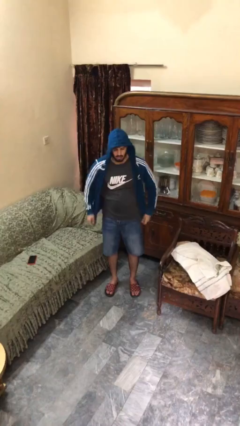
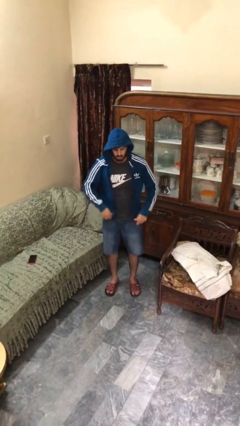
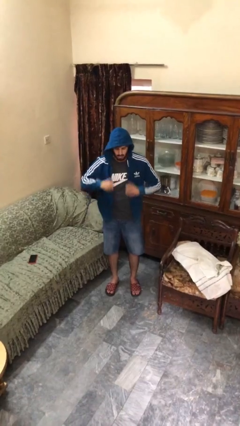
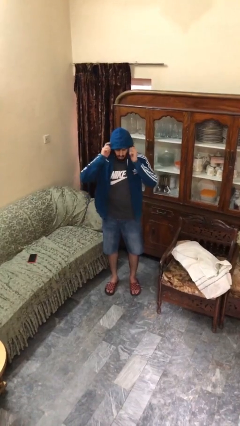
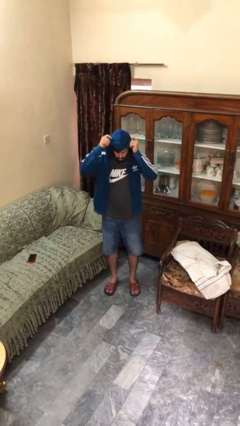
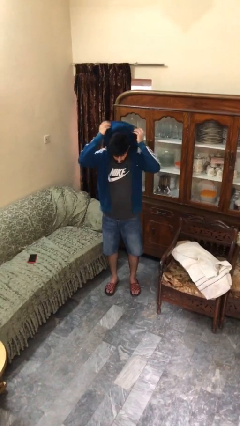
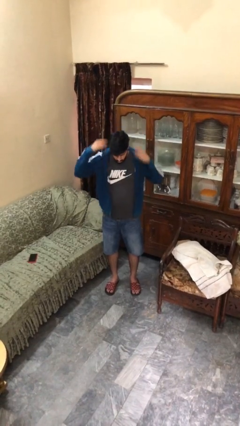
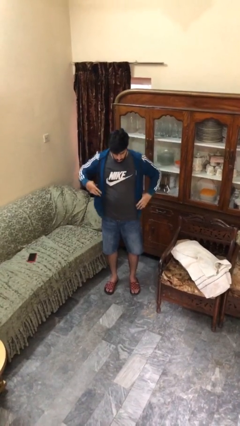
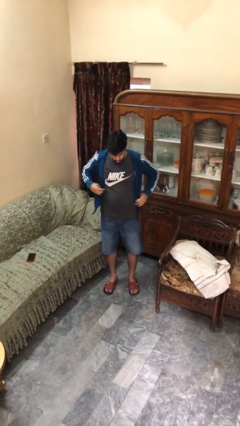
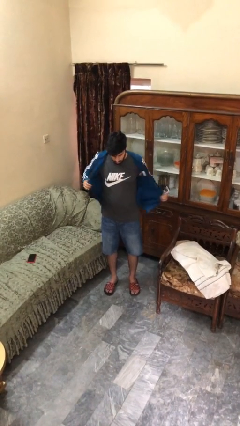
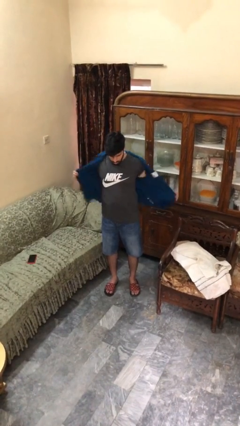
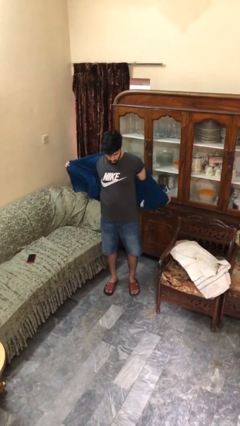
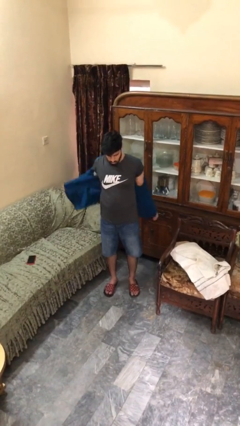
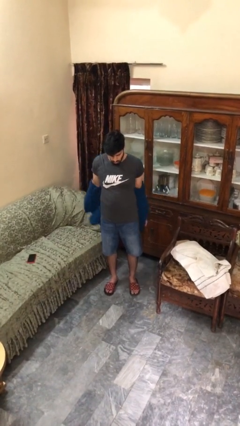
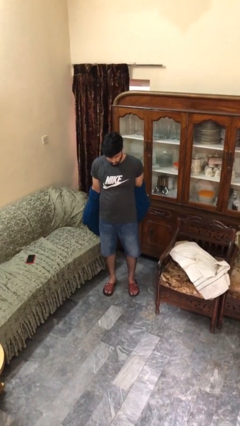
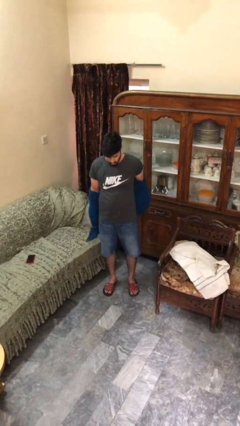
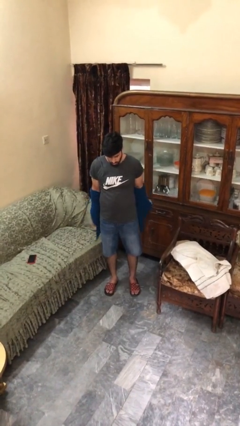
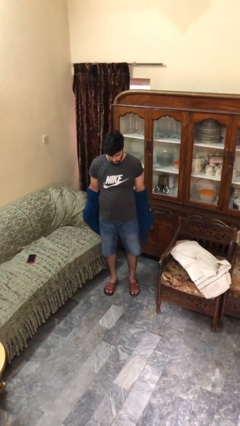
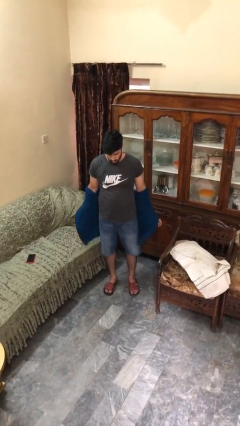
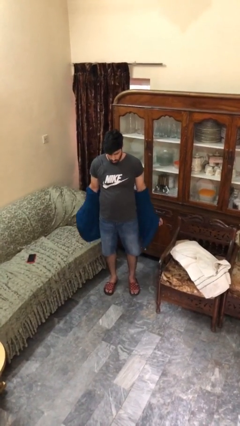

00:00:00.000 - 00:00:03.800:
person takes off hoodie

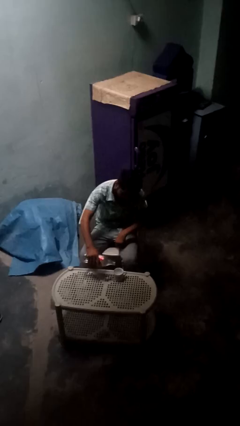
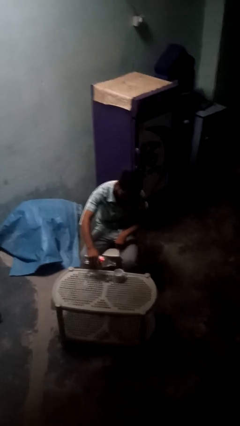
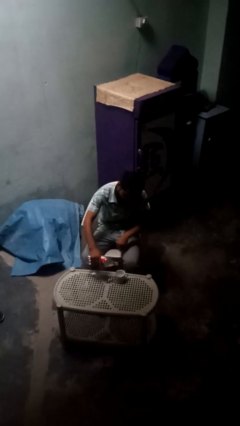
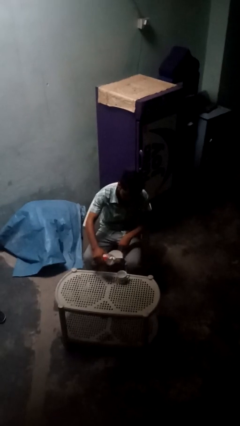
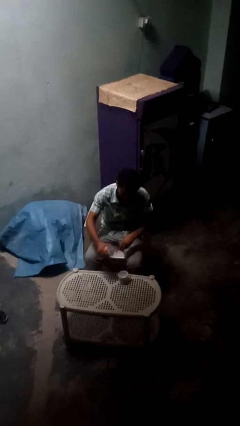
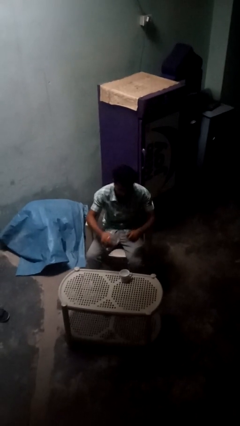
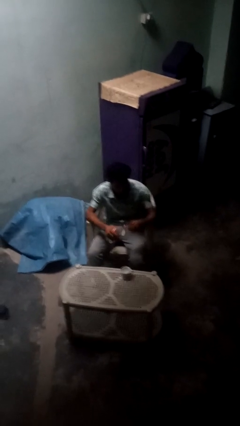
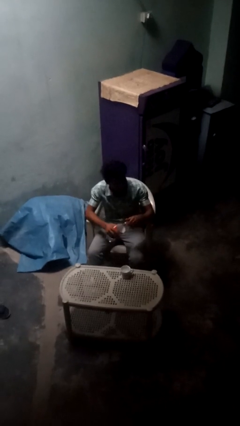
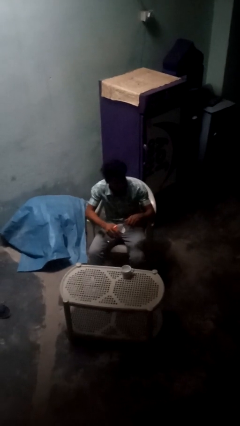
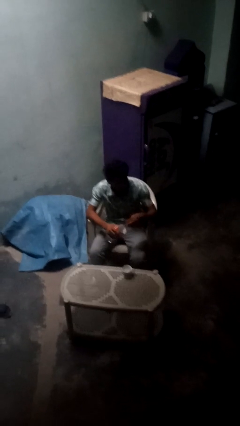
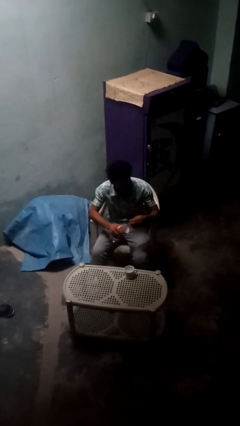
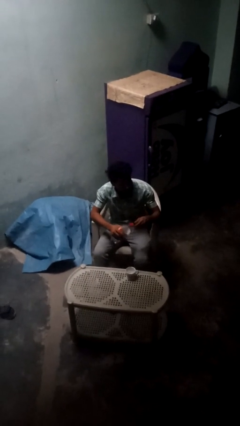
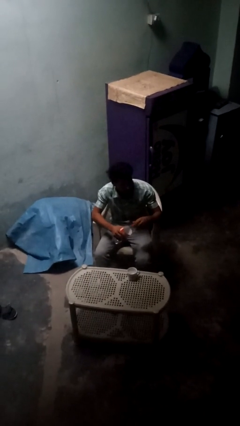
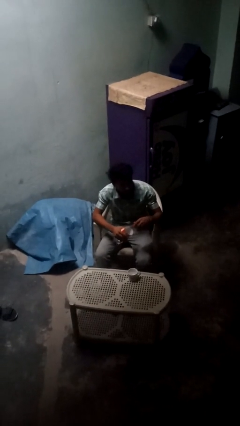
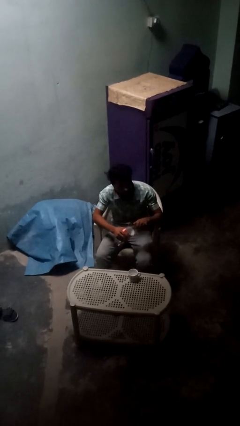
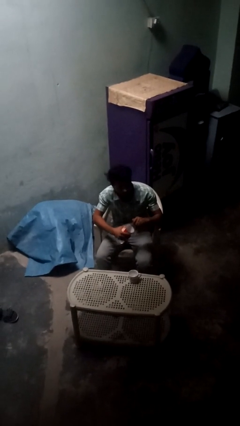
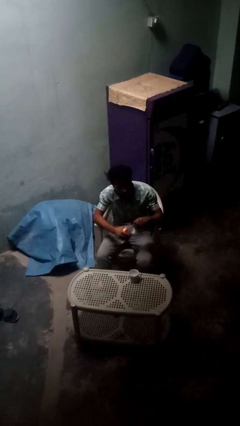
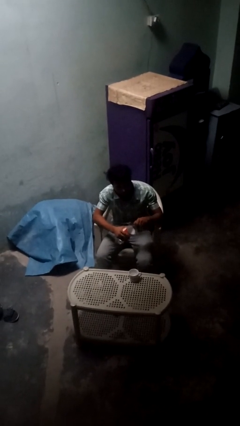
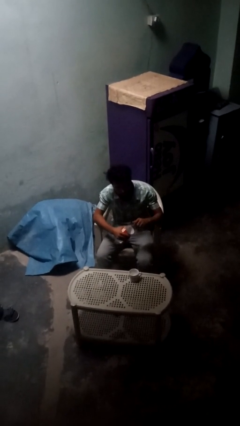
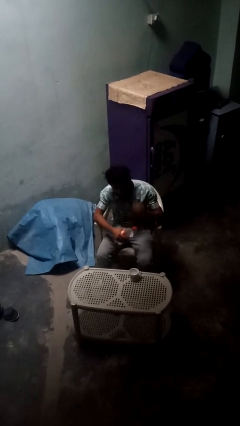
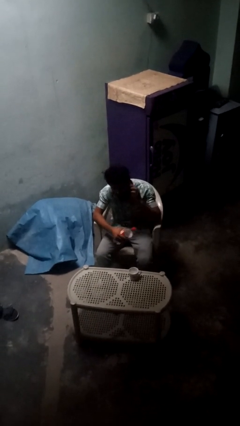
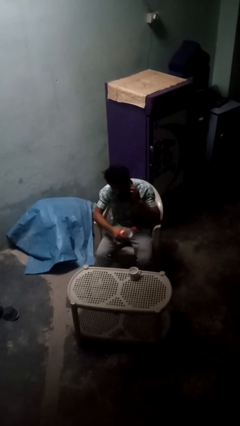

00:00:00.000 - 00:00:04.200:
person screws lid to bottle

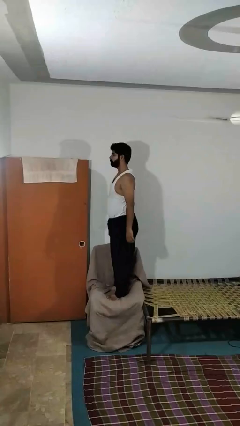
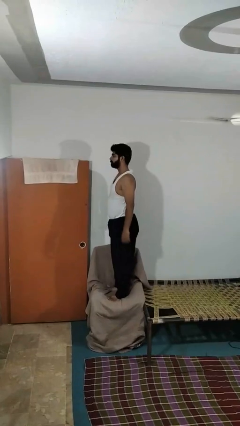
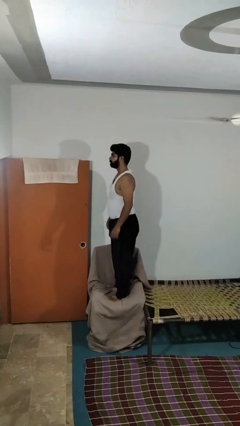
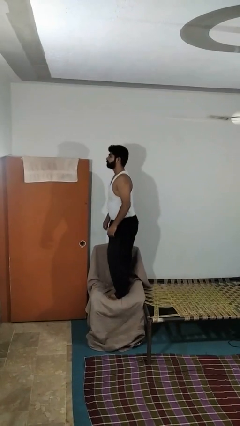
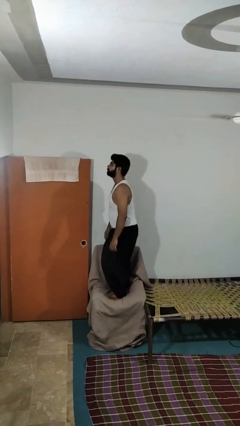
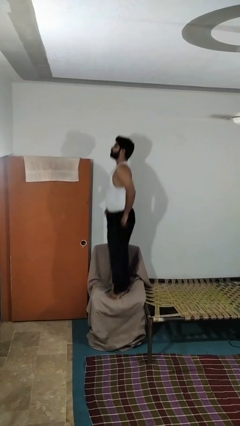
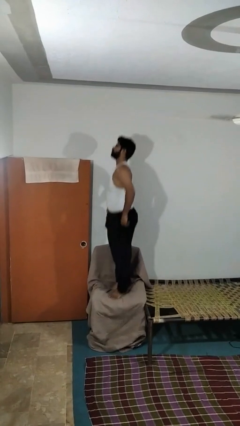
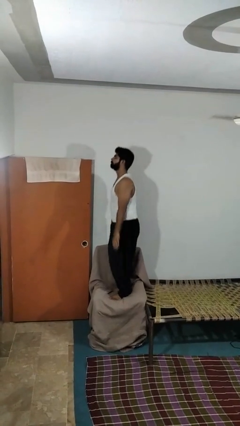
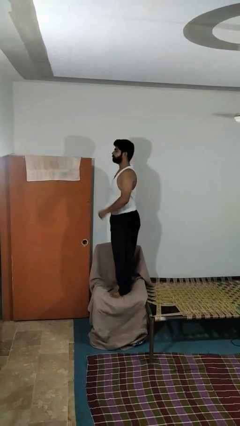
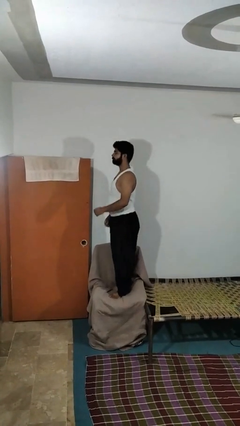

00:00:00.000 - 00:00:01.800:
person jumps on couch

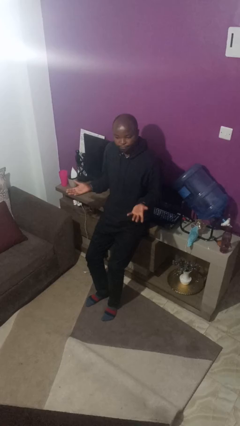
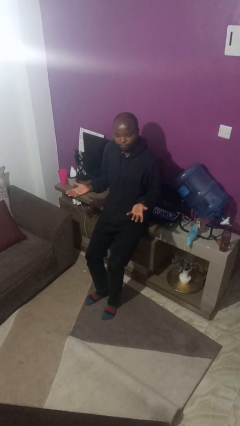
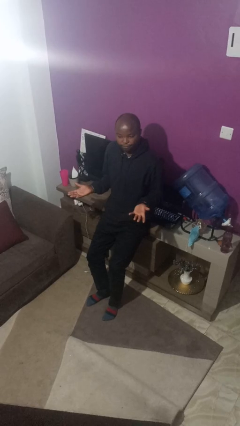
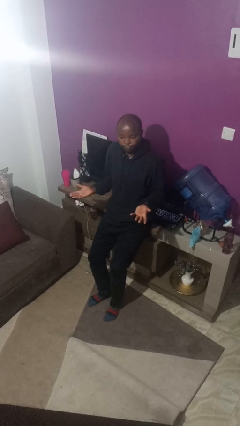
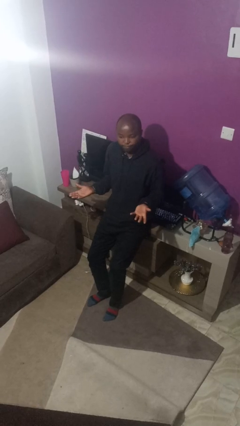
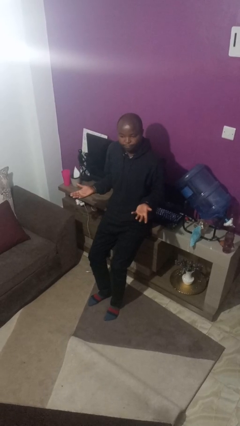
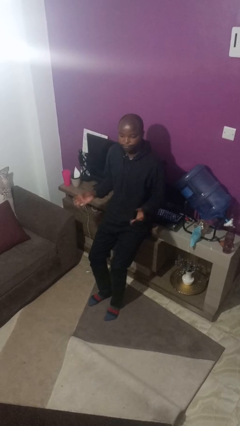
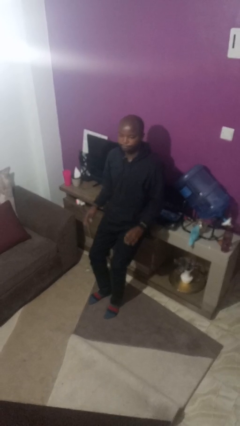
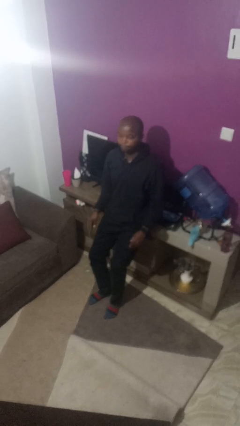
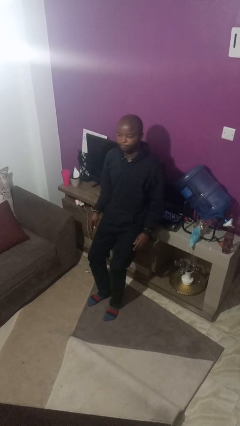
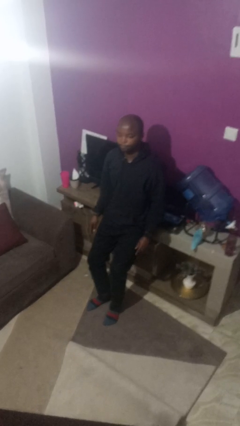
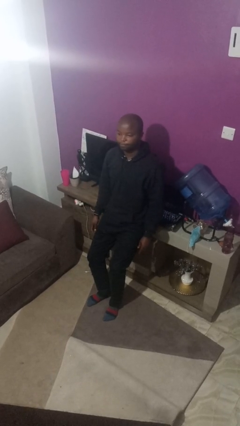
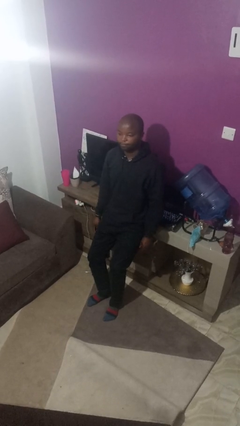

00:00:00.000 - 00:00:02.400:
person shrugs

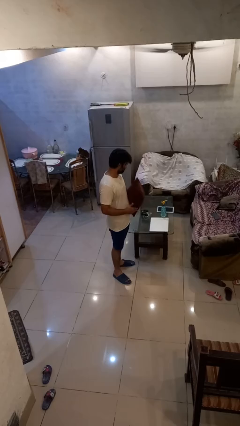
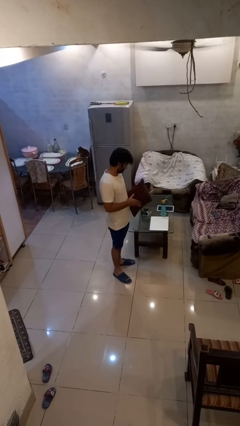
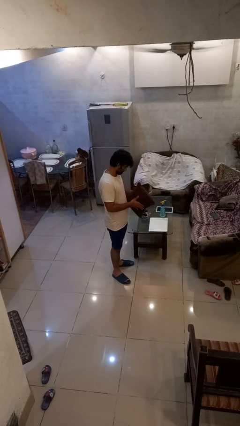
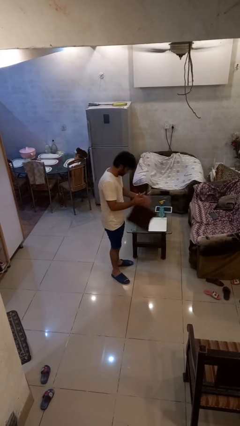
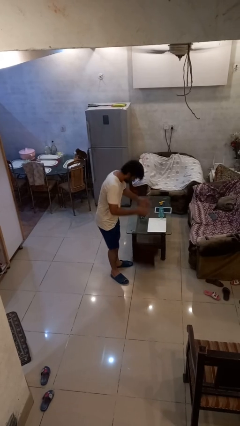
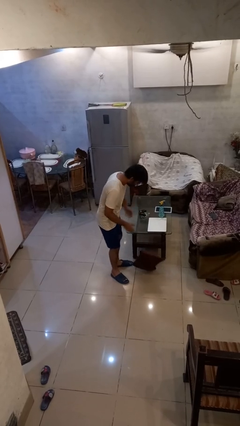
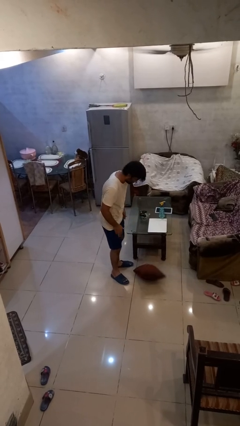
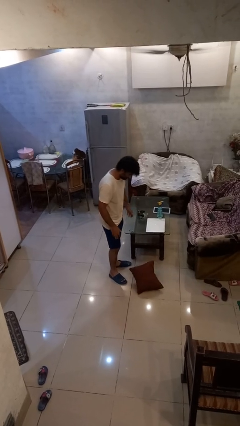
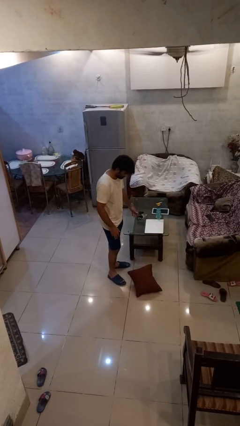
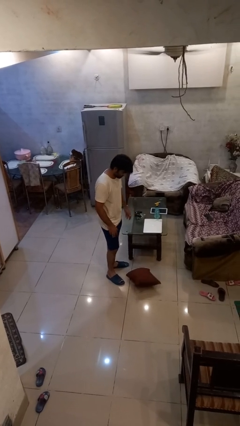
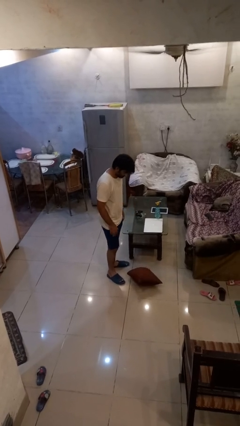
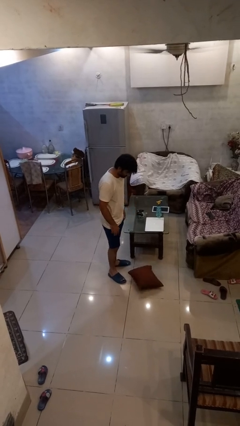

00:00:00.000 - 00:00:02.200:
person drops object

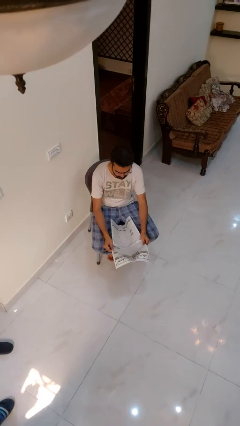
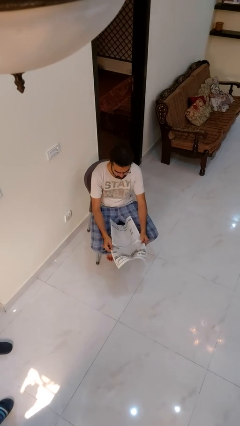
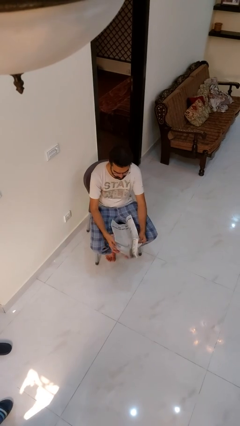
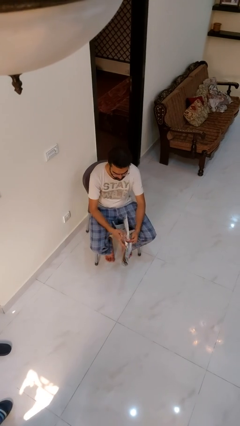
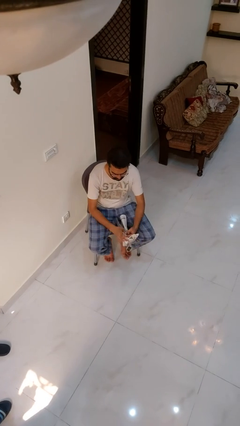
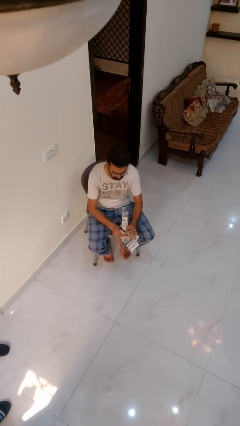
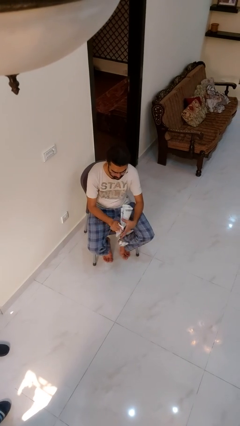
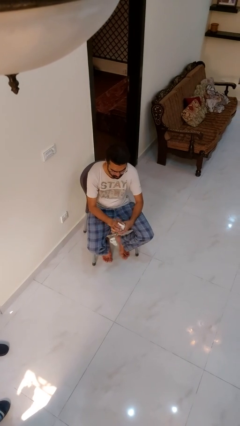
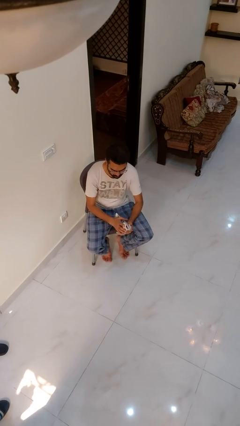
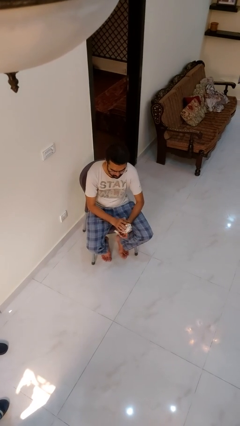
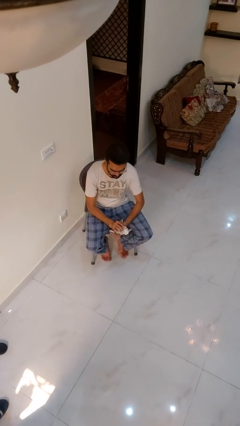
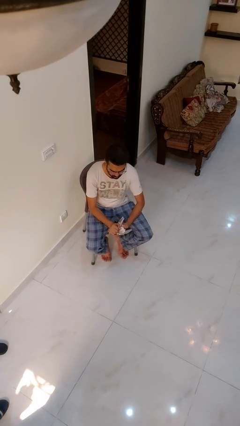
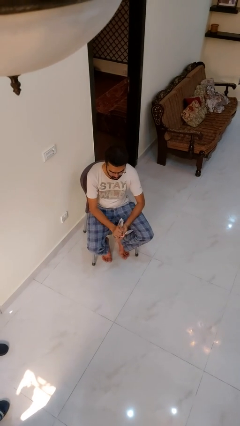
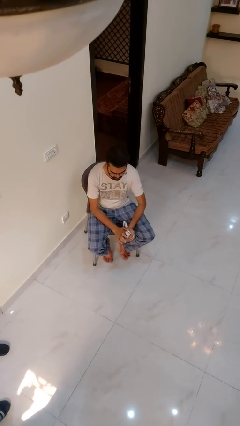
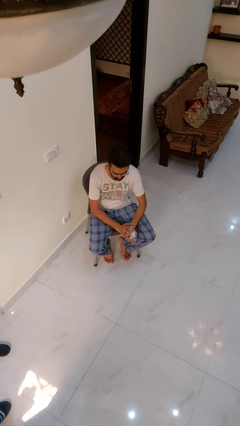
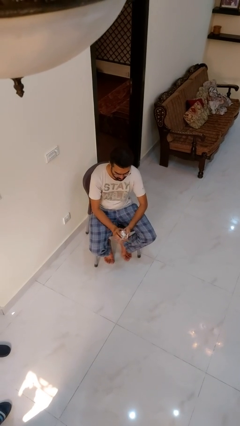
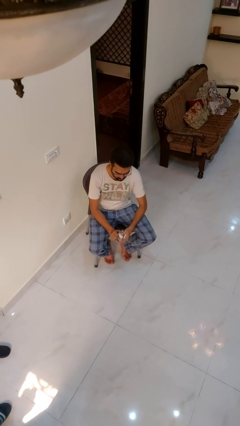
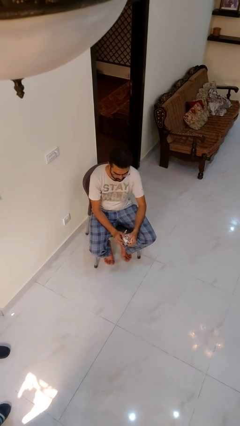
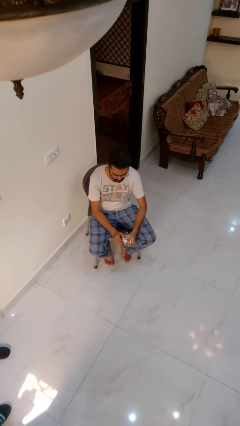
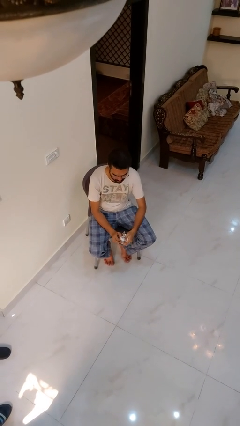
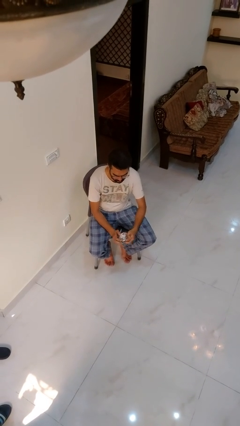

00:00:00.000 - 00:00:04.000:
person crumples paper
